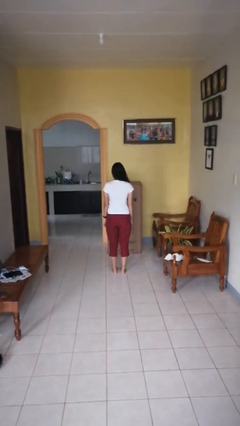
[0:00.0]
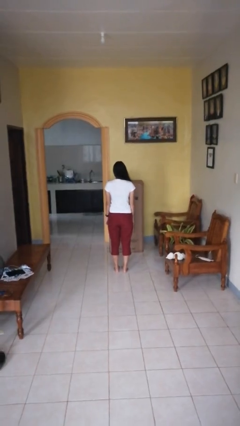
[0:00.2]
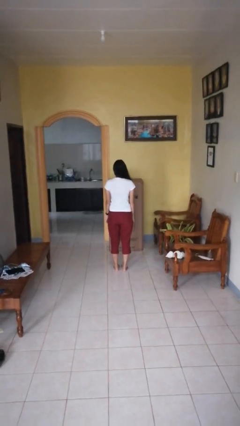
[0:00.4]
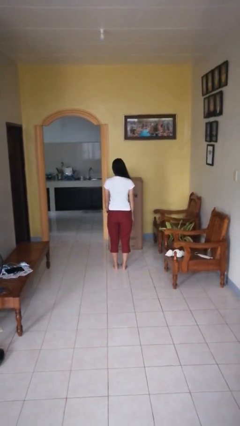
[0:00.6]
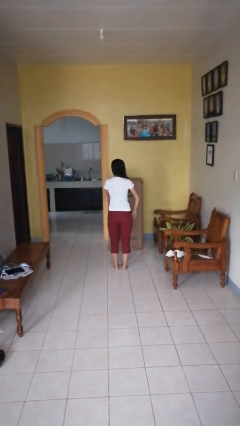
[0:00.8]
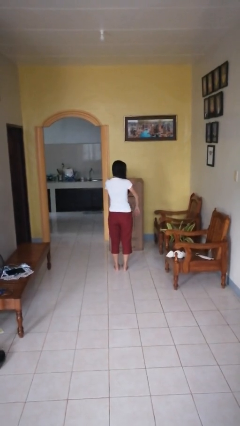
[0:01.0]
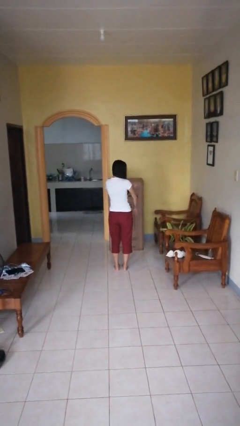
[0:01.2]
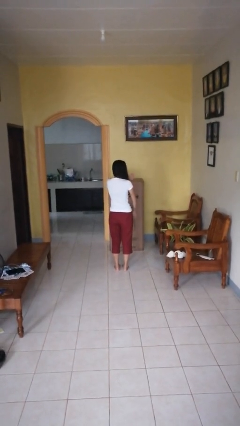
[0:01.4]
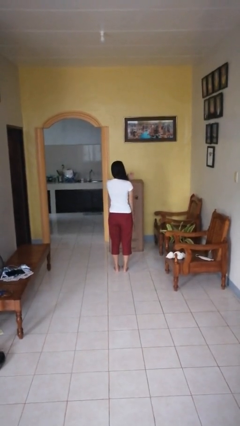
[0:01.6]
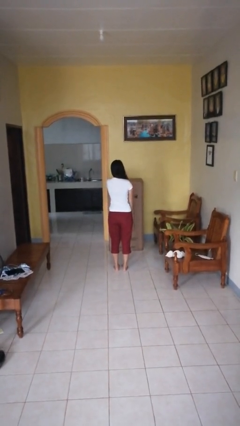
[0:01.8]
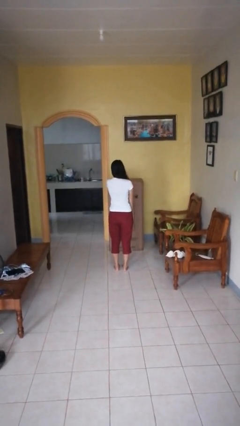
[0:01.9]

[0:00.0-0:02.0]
person swats bug

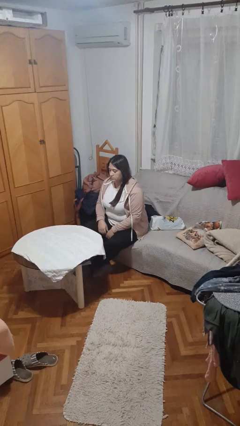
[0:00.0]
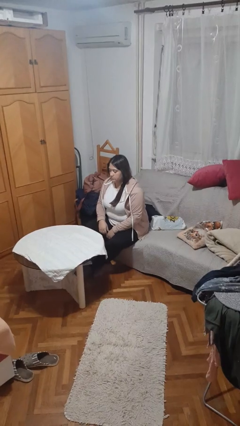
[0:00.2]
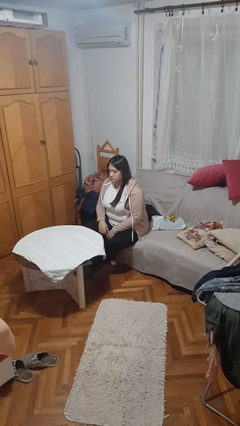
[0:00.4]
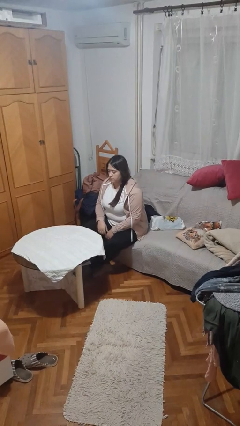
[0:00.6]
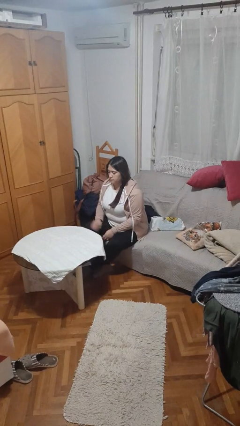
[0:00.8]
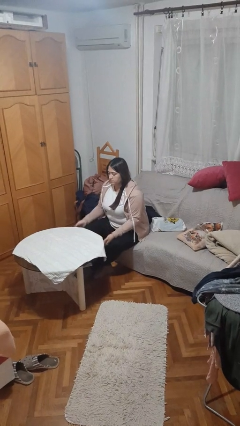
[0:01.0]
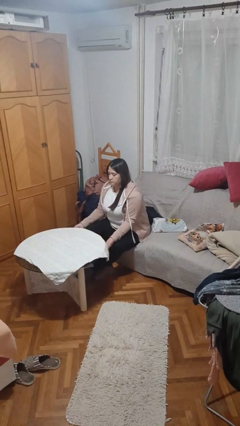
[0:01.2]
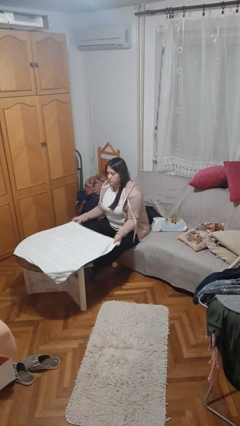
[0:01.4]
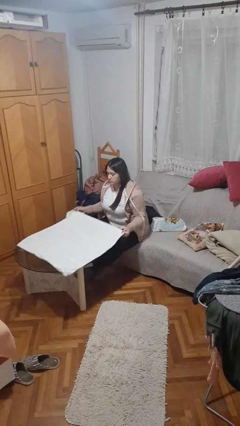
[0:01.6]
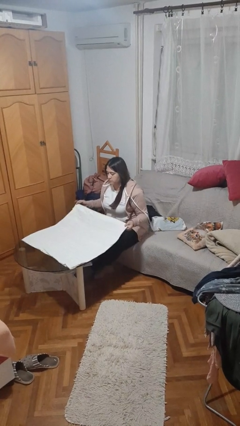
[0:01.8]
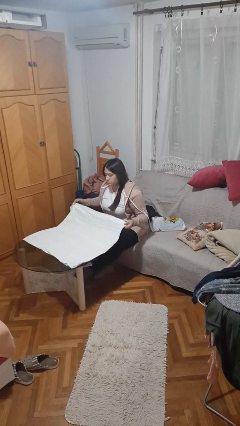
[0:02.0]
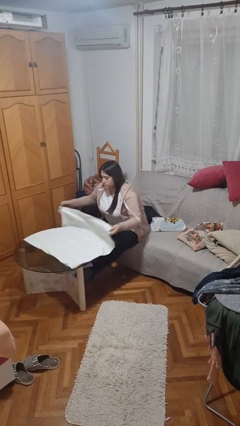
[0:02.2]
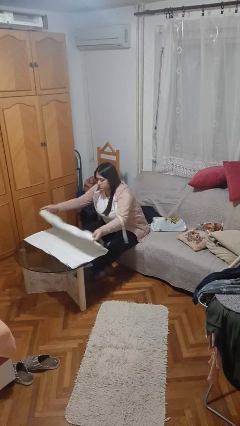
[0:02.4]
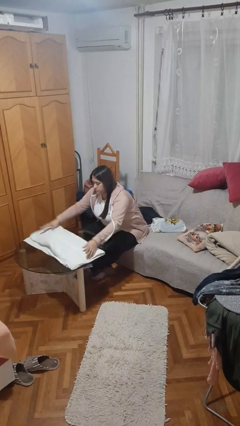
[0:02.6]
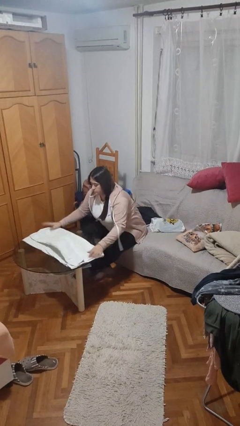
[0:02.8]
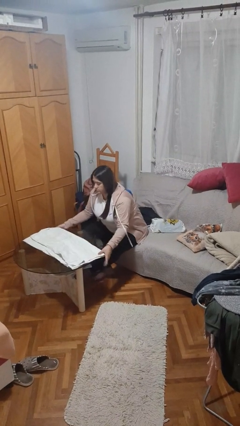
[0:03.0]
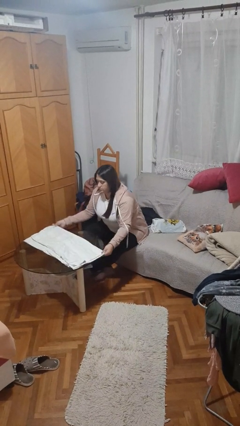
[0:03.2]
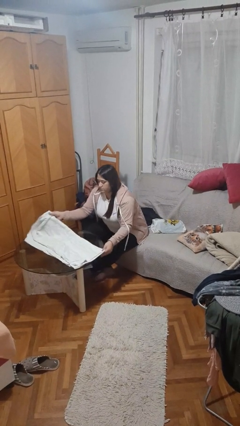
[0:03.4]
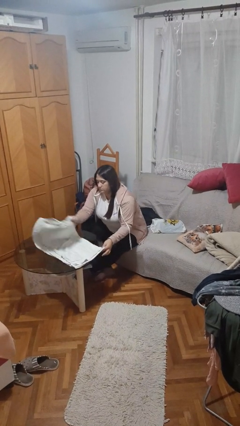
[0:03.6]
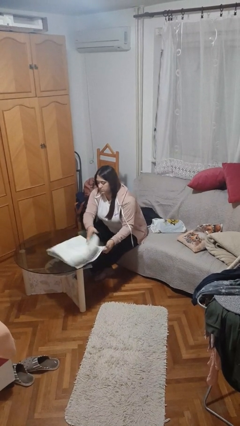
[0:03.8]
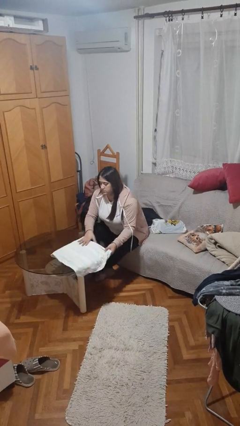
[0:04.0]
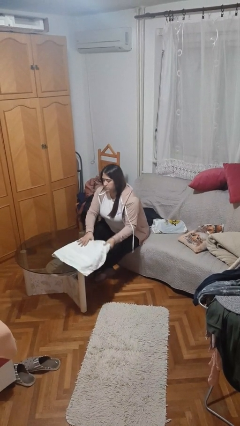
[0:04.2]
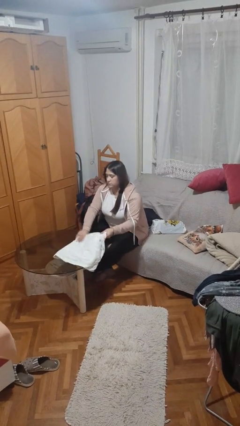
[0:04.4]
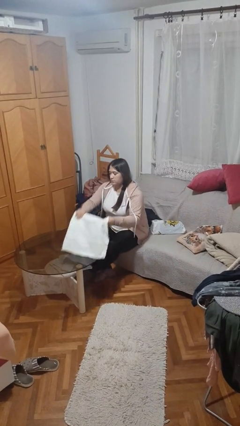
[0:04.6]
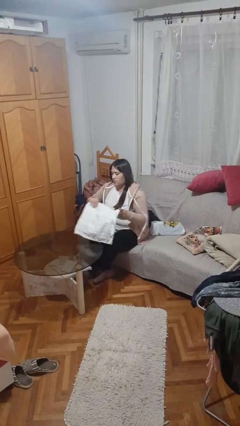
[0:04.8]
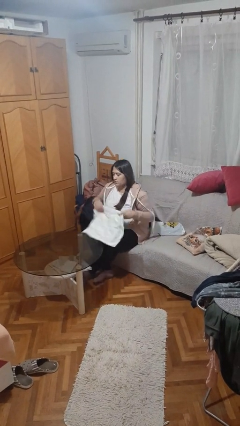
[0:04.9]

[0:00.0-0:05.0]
person folds tablecloth

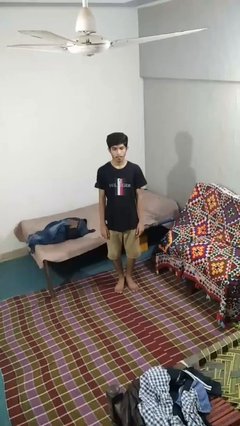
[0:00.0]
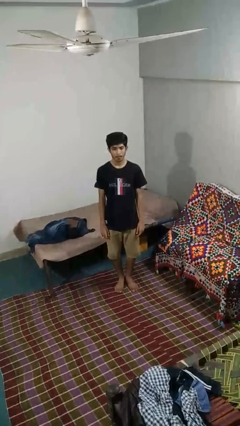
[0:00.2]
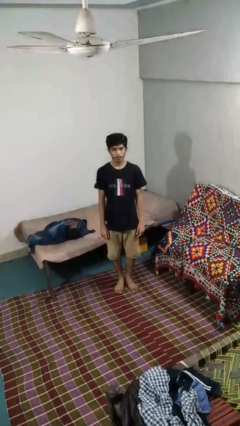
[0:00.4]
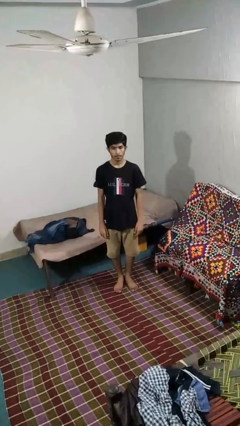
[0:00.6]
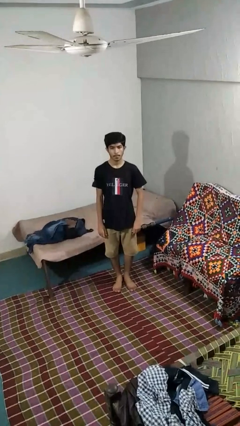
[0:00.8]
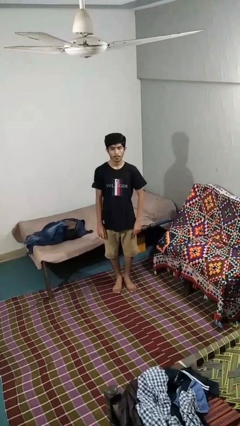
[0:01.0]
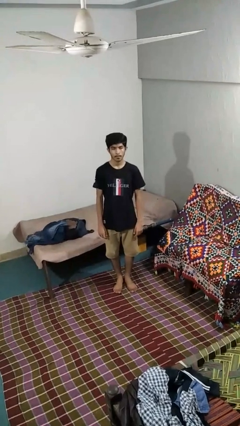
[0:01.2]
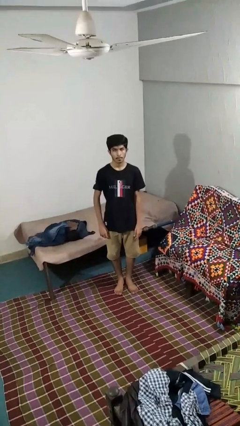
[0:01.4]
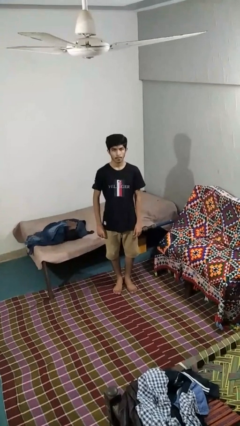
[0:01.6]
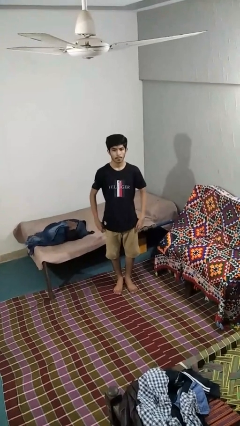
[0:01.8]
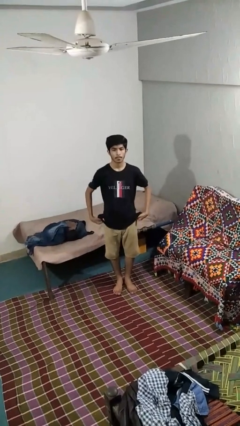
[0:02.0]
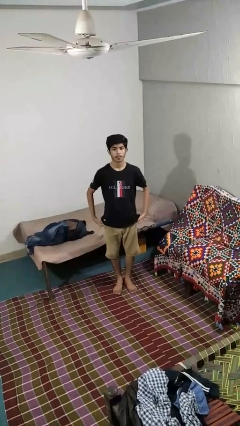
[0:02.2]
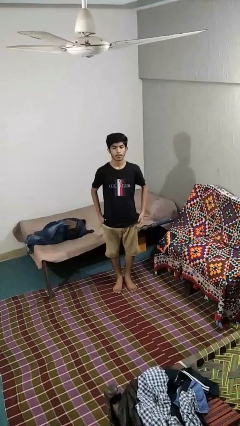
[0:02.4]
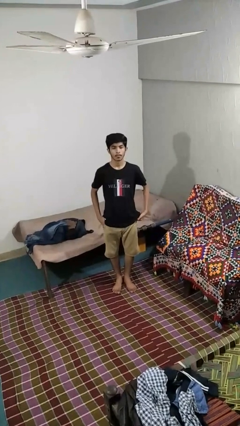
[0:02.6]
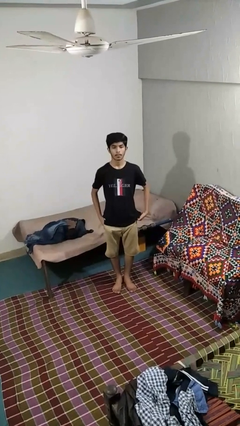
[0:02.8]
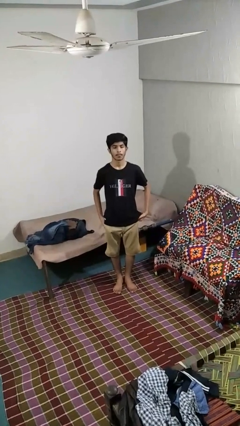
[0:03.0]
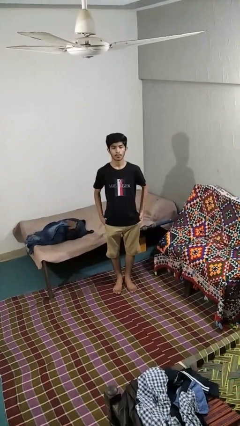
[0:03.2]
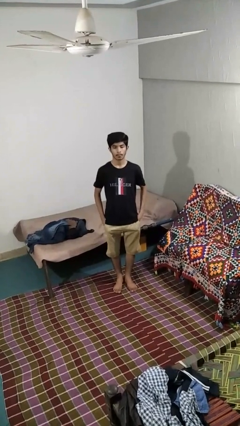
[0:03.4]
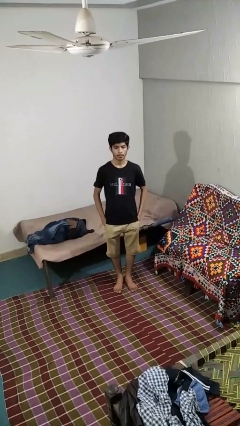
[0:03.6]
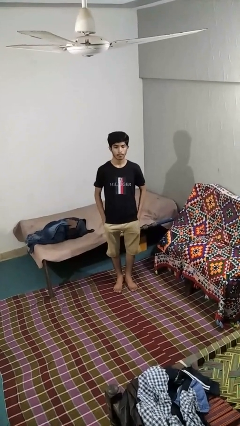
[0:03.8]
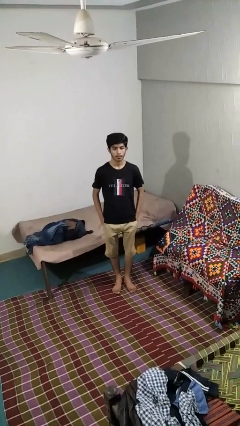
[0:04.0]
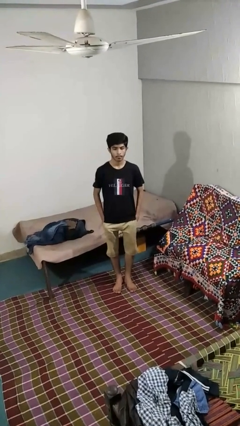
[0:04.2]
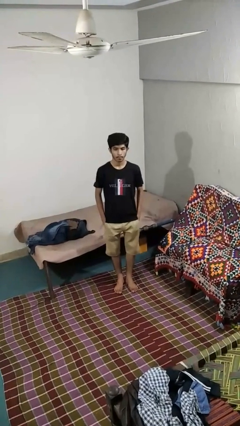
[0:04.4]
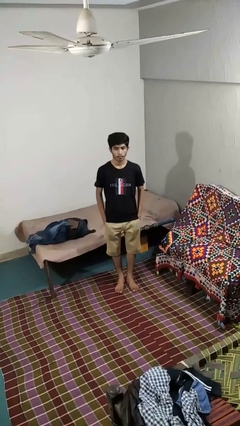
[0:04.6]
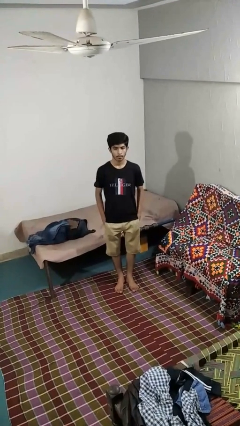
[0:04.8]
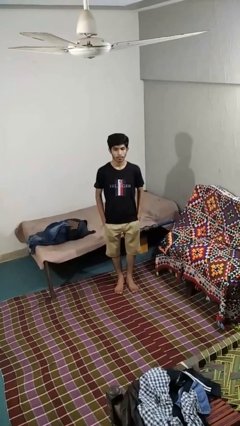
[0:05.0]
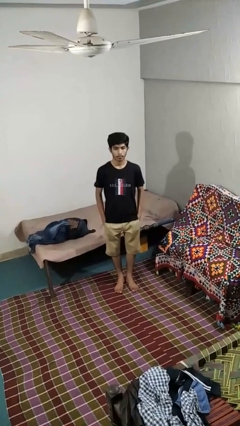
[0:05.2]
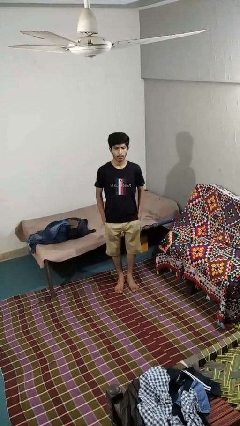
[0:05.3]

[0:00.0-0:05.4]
person puts hands in back pockets

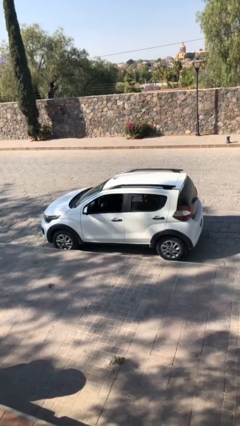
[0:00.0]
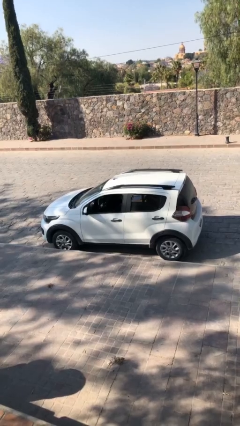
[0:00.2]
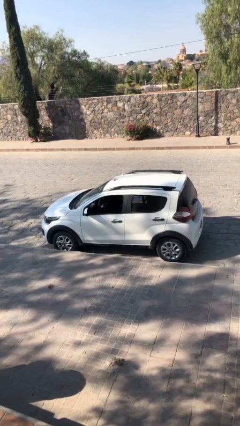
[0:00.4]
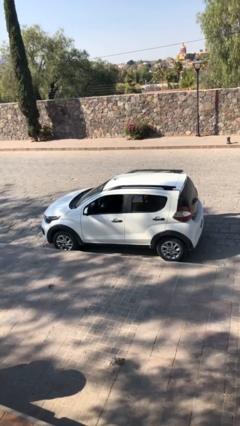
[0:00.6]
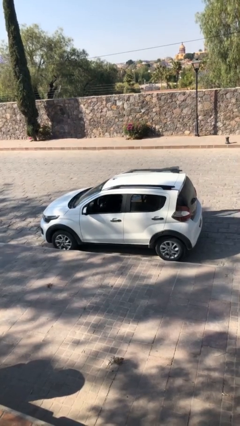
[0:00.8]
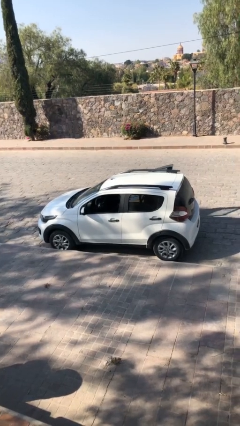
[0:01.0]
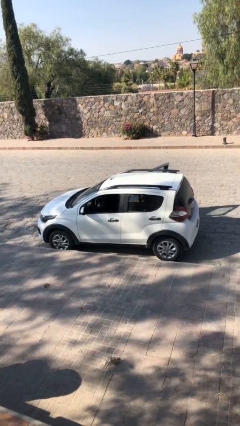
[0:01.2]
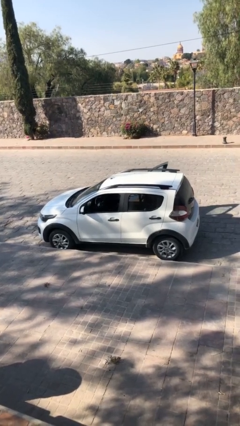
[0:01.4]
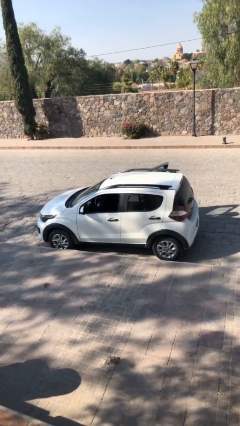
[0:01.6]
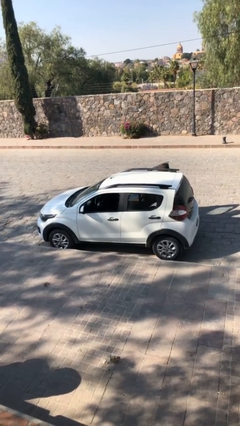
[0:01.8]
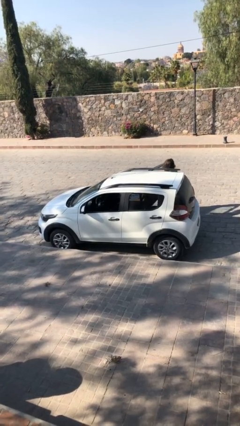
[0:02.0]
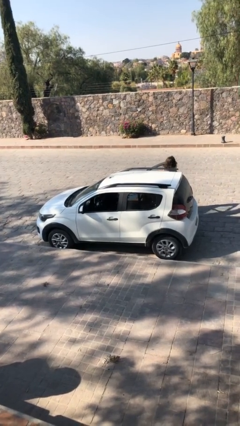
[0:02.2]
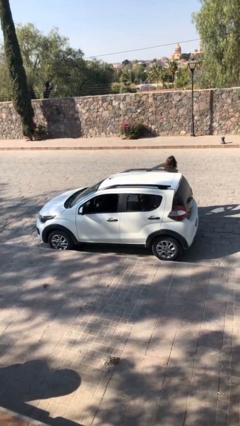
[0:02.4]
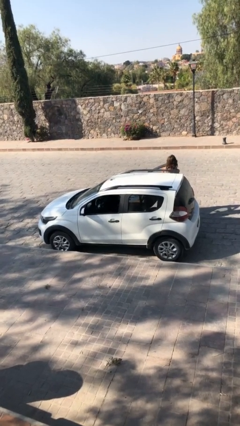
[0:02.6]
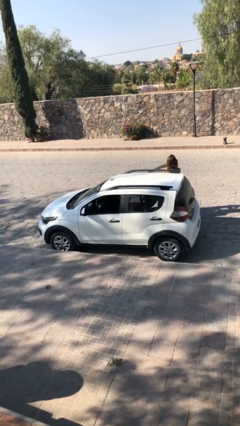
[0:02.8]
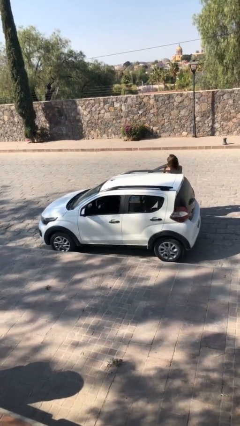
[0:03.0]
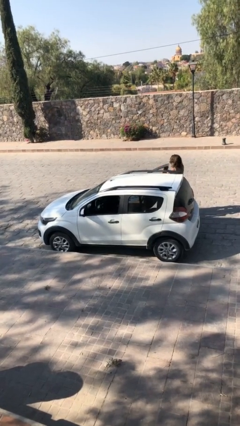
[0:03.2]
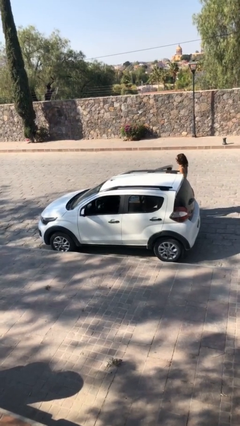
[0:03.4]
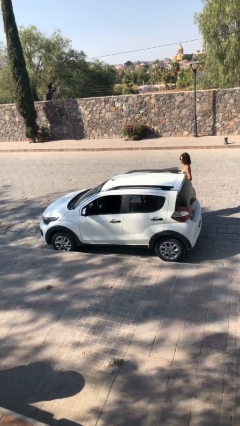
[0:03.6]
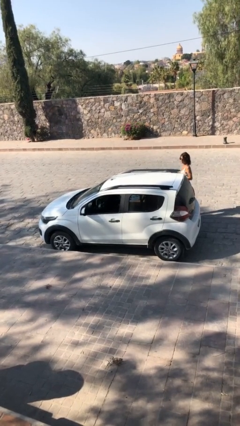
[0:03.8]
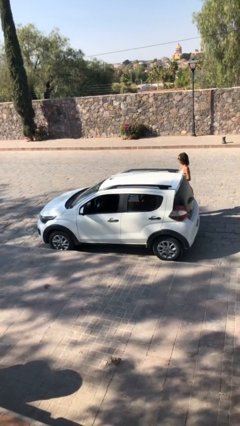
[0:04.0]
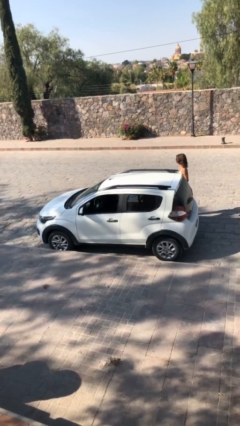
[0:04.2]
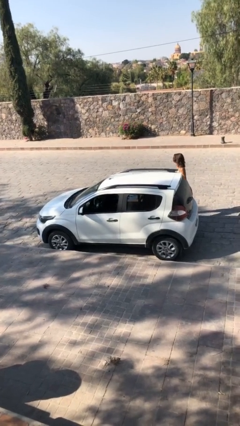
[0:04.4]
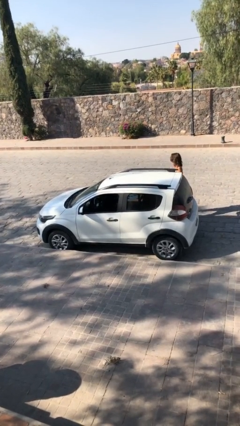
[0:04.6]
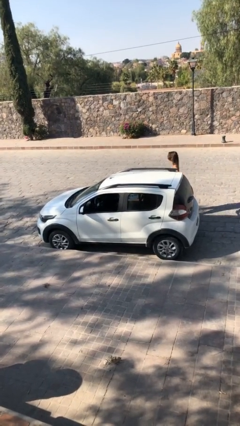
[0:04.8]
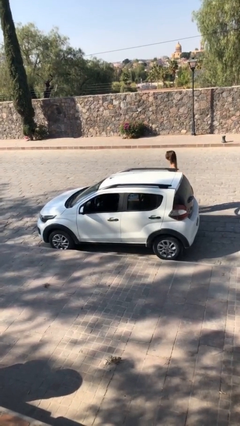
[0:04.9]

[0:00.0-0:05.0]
car drops off person

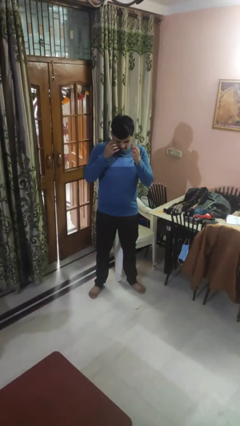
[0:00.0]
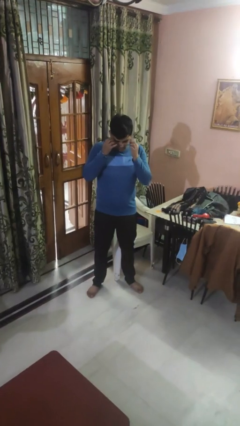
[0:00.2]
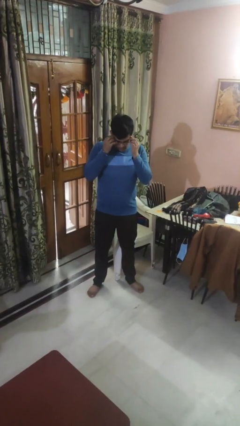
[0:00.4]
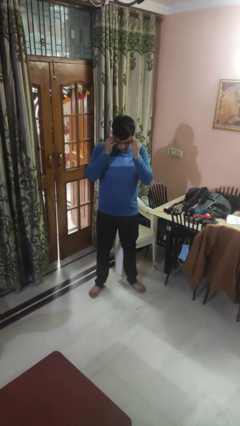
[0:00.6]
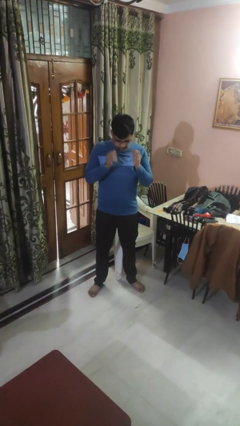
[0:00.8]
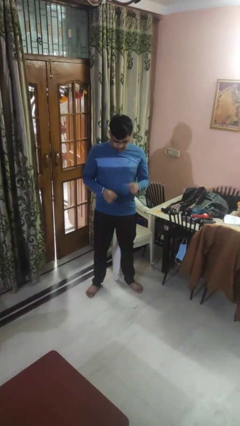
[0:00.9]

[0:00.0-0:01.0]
person puts on glasses
